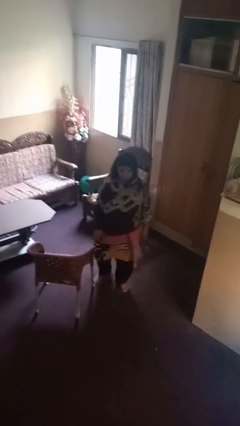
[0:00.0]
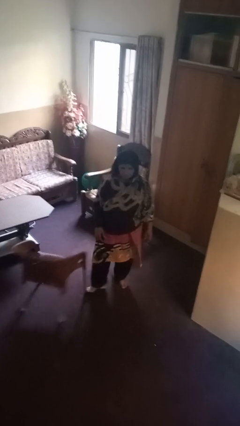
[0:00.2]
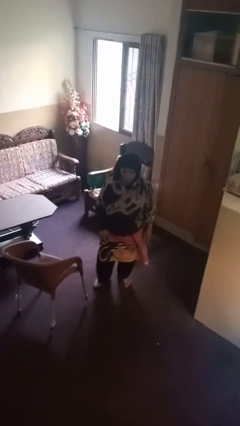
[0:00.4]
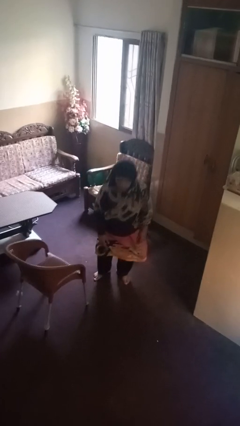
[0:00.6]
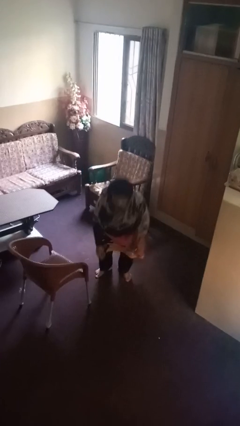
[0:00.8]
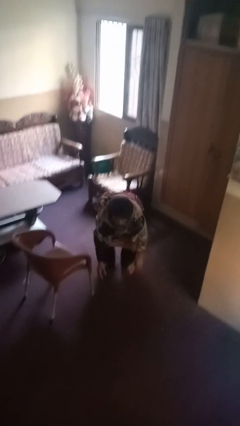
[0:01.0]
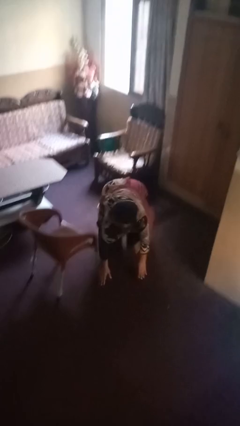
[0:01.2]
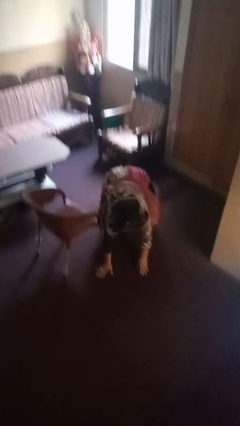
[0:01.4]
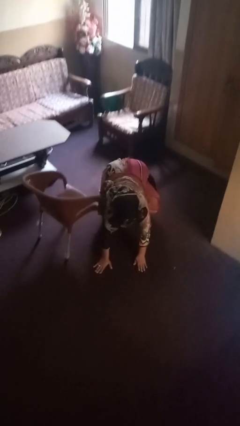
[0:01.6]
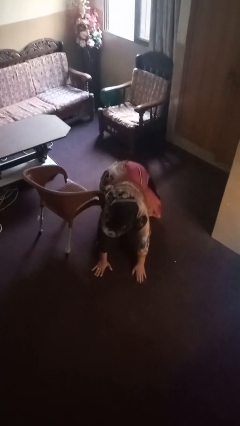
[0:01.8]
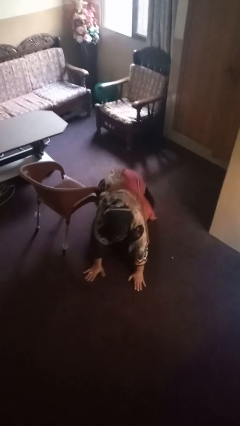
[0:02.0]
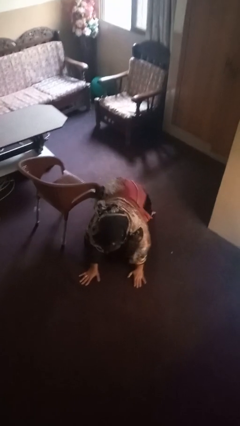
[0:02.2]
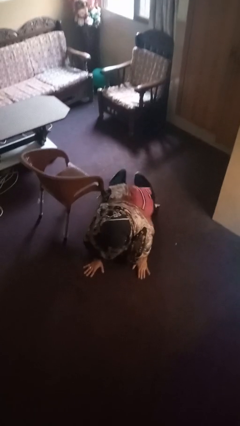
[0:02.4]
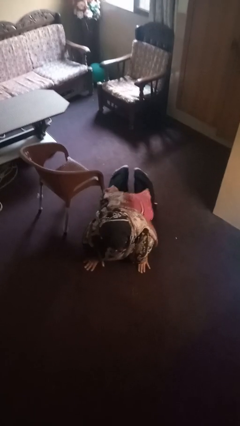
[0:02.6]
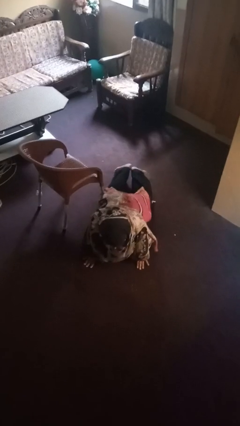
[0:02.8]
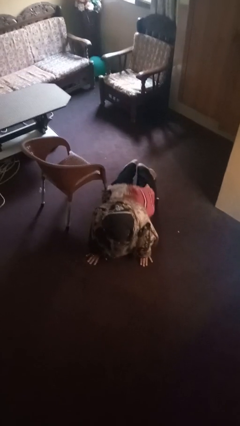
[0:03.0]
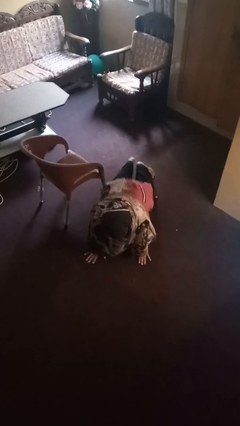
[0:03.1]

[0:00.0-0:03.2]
person lies down on floor

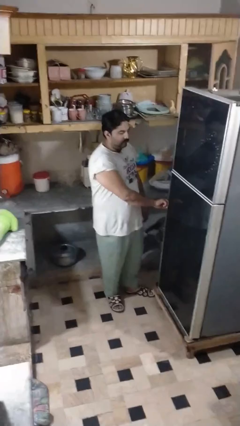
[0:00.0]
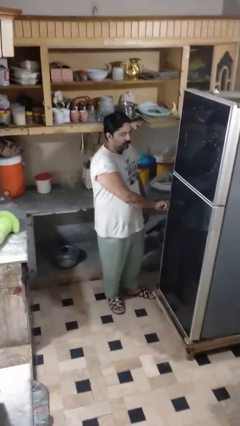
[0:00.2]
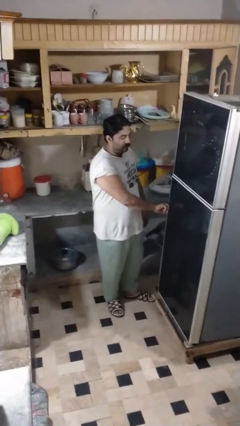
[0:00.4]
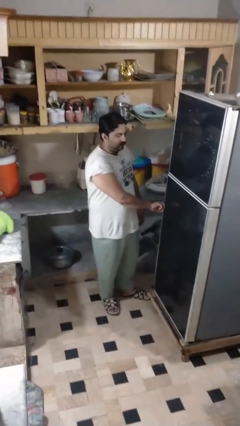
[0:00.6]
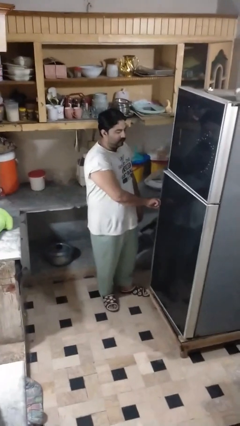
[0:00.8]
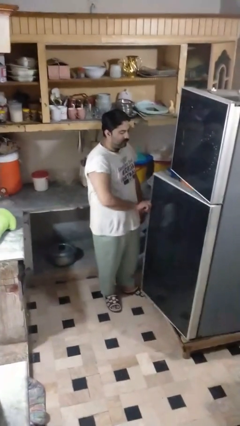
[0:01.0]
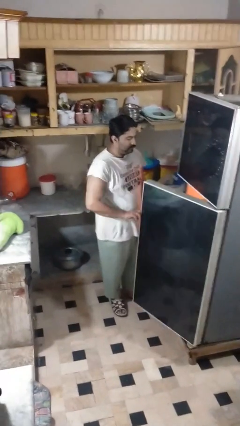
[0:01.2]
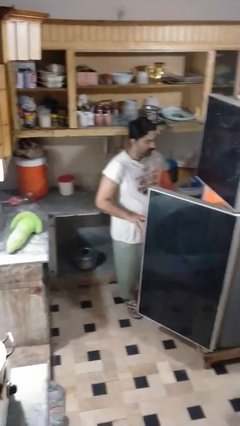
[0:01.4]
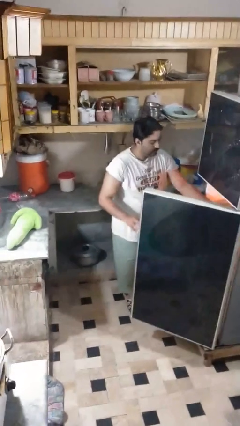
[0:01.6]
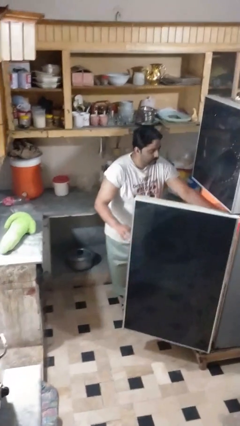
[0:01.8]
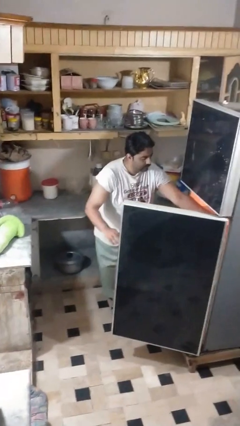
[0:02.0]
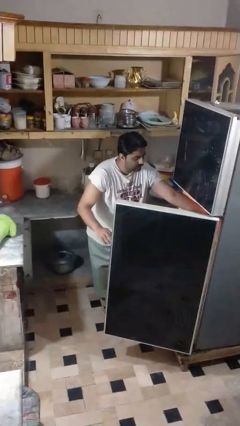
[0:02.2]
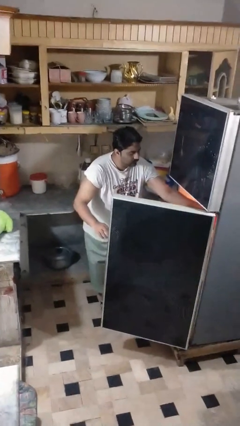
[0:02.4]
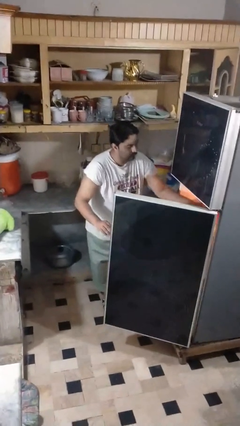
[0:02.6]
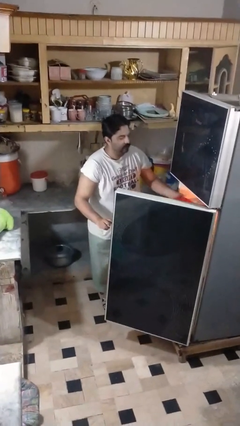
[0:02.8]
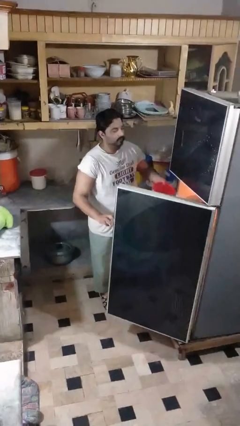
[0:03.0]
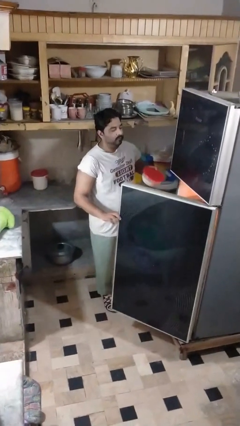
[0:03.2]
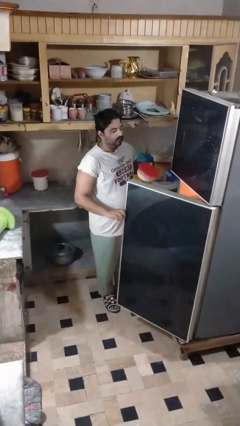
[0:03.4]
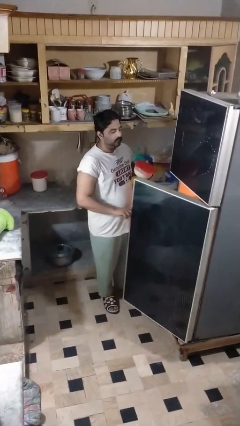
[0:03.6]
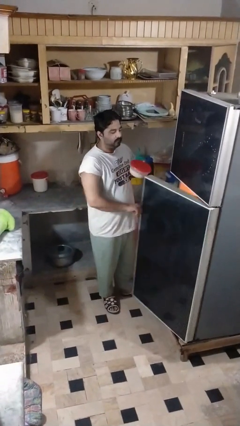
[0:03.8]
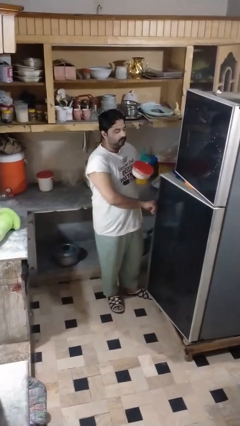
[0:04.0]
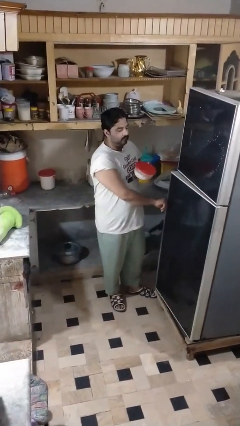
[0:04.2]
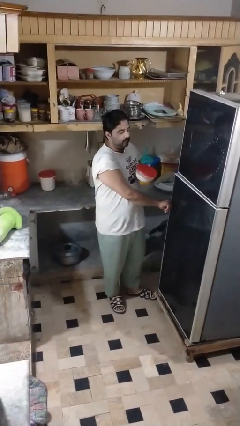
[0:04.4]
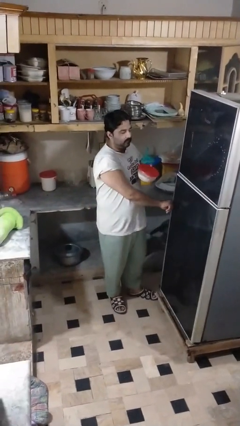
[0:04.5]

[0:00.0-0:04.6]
person takes object from refrigerator

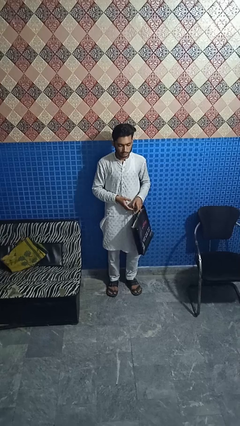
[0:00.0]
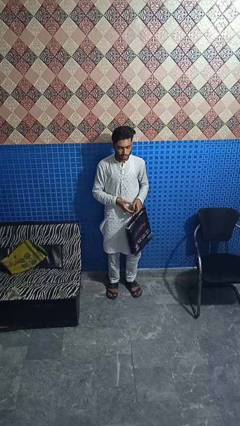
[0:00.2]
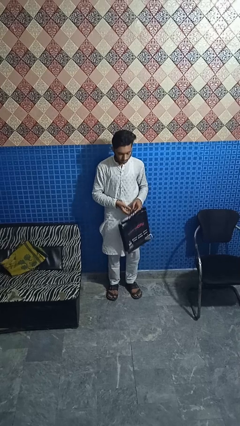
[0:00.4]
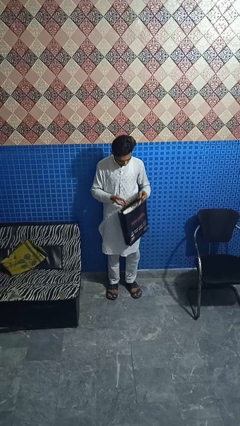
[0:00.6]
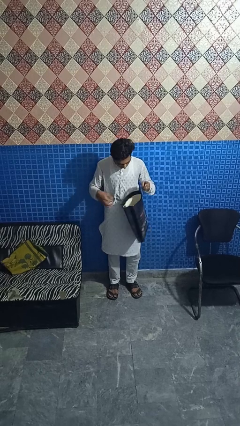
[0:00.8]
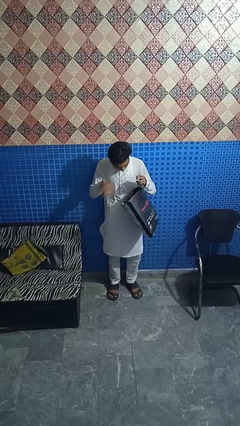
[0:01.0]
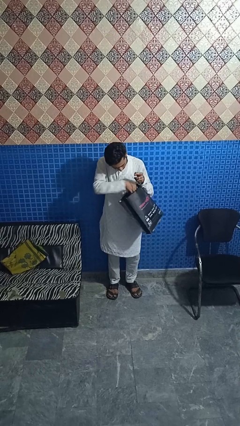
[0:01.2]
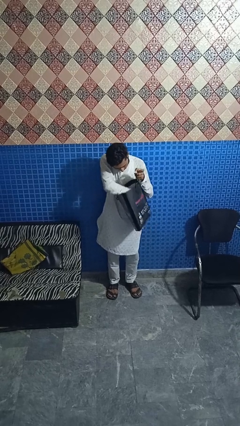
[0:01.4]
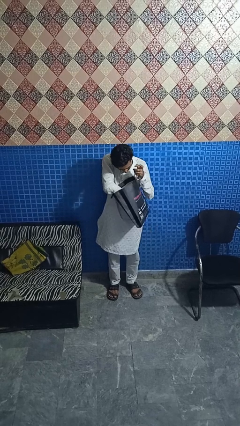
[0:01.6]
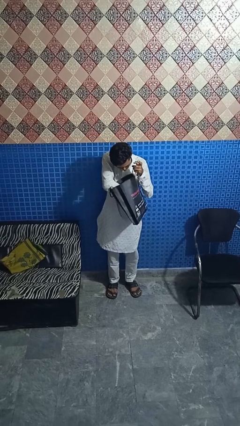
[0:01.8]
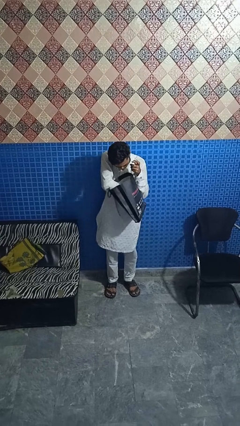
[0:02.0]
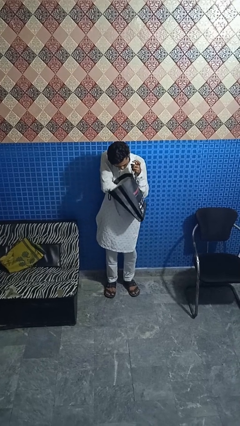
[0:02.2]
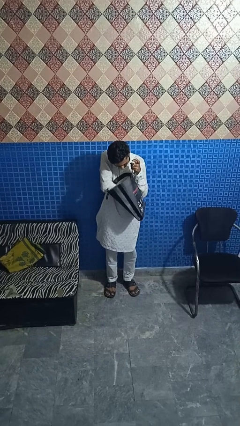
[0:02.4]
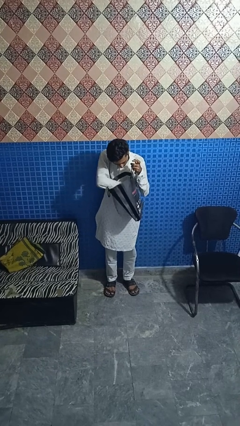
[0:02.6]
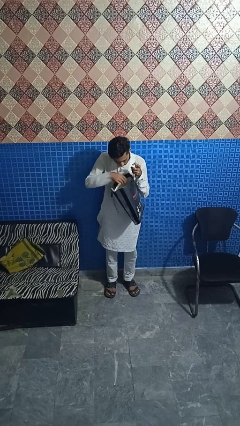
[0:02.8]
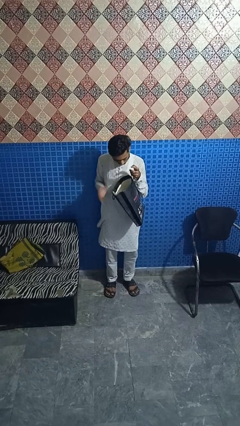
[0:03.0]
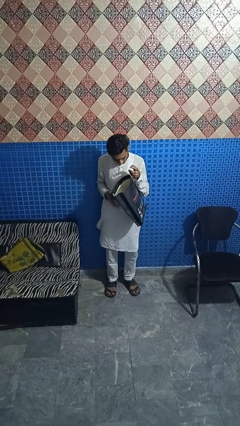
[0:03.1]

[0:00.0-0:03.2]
person searches in bag

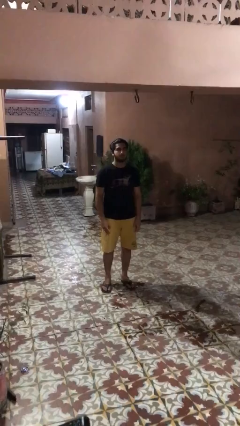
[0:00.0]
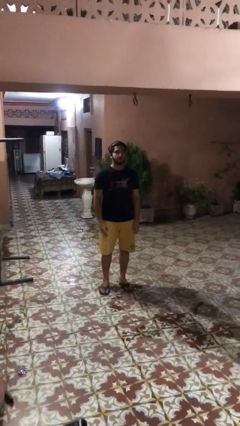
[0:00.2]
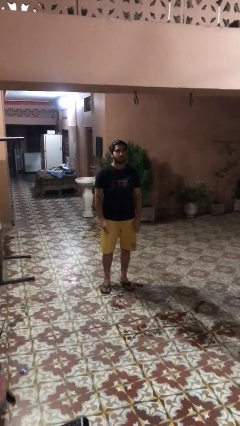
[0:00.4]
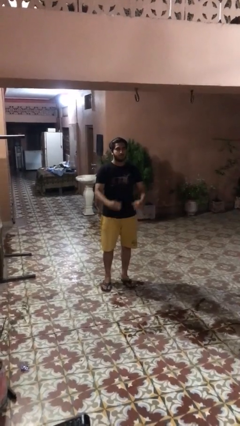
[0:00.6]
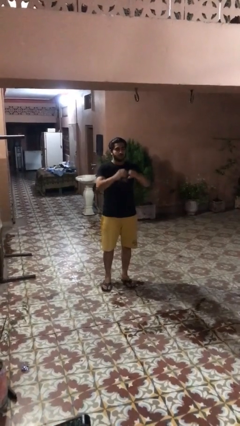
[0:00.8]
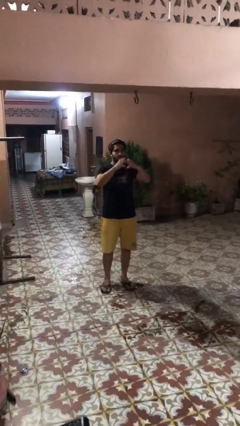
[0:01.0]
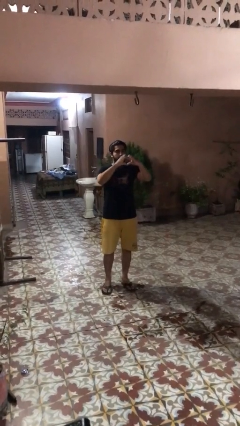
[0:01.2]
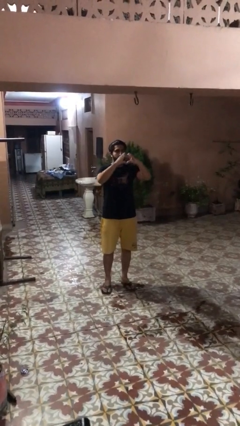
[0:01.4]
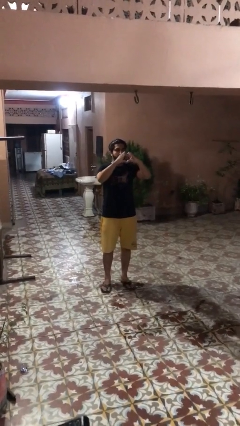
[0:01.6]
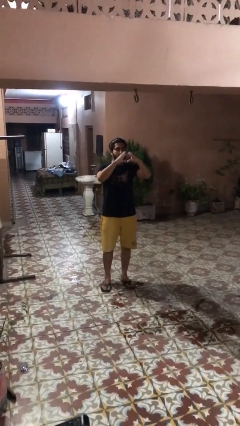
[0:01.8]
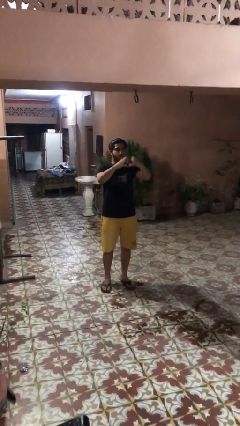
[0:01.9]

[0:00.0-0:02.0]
person gestures heart

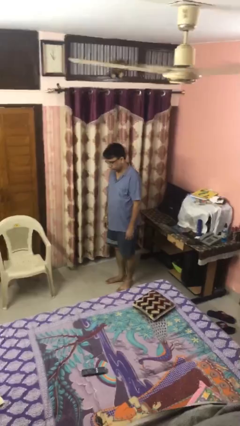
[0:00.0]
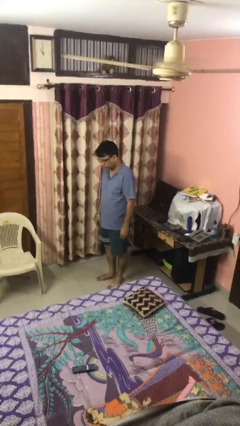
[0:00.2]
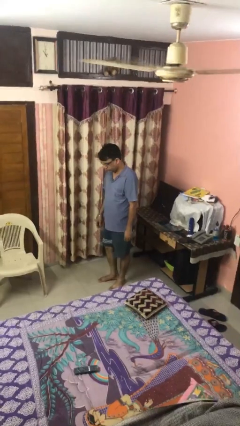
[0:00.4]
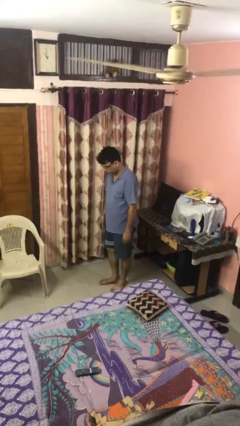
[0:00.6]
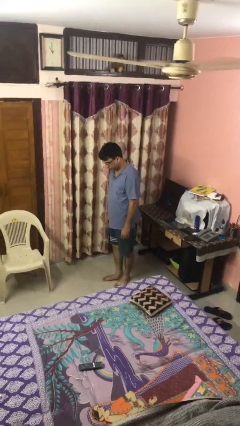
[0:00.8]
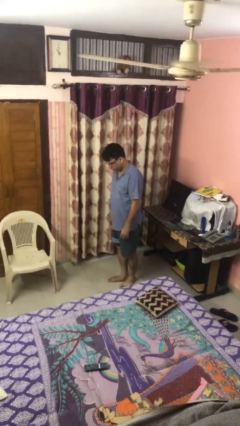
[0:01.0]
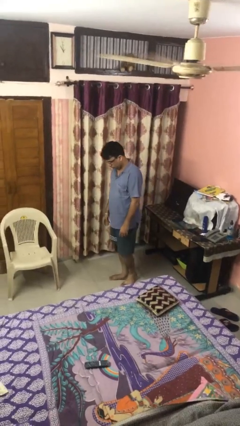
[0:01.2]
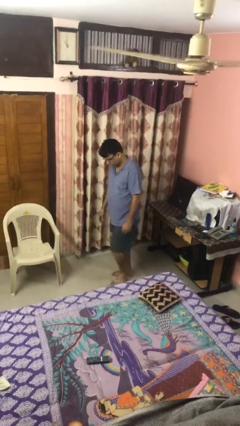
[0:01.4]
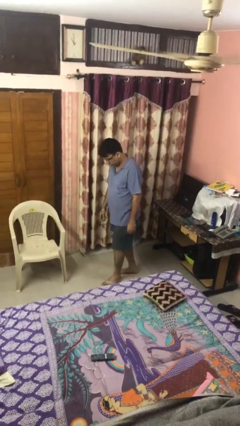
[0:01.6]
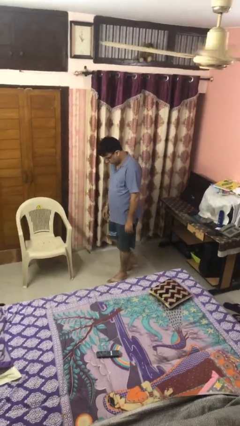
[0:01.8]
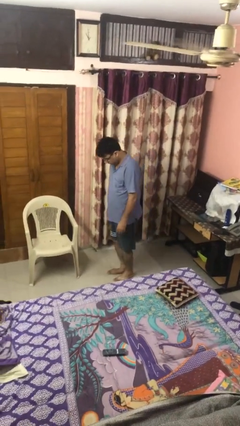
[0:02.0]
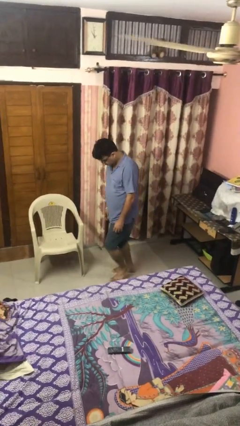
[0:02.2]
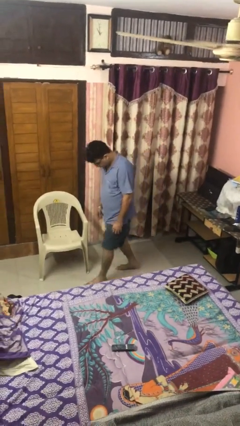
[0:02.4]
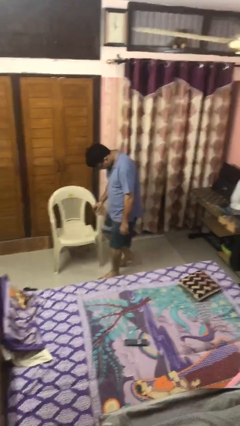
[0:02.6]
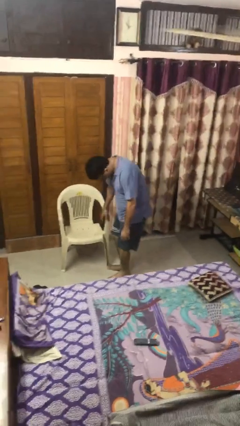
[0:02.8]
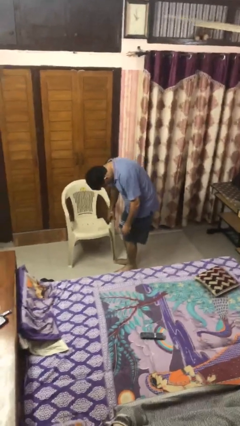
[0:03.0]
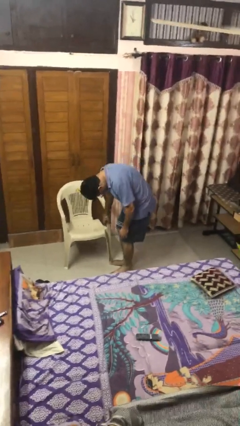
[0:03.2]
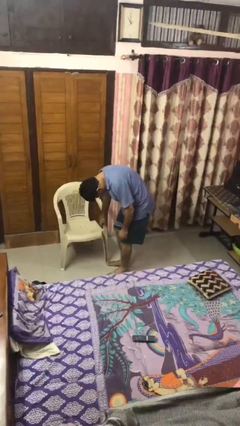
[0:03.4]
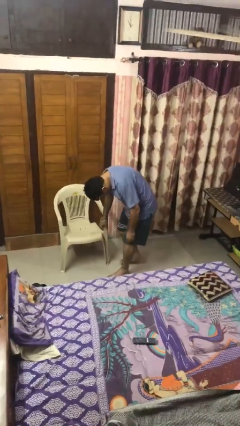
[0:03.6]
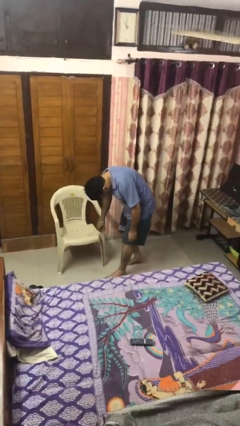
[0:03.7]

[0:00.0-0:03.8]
person stubs toe

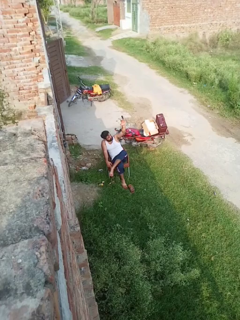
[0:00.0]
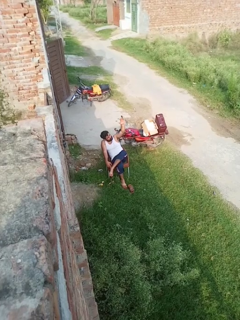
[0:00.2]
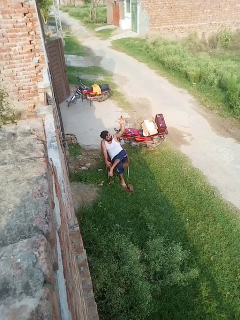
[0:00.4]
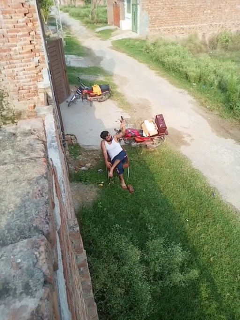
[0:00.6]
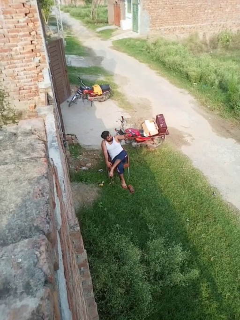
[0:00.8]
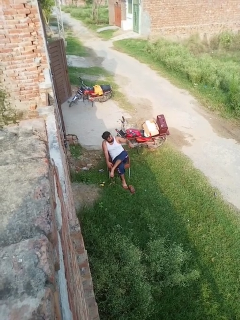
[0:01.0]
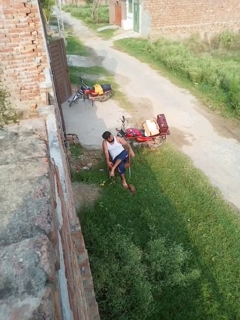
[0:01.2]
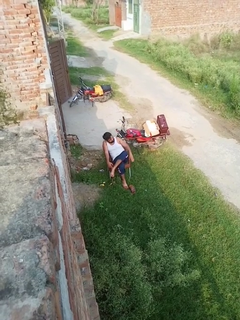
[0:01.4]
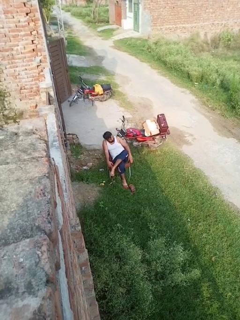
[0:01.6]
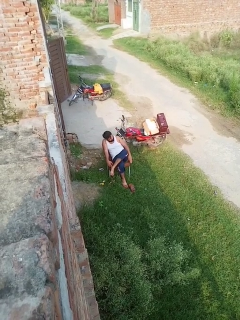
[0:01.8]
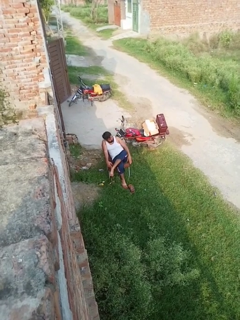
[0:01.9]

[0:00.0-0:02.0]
person gestures swipe down
